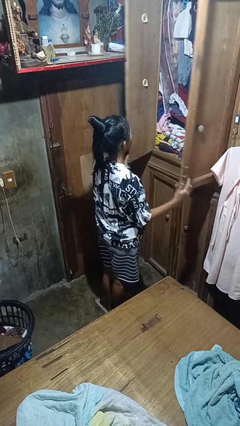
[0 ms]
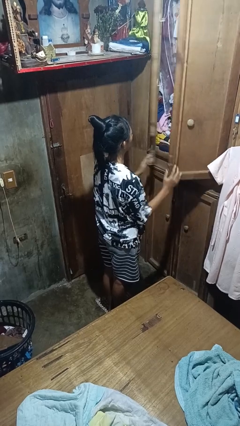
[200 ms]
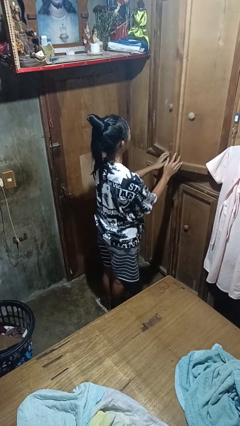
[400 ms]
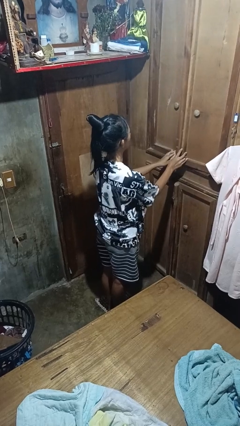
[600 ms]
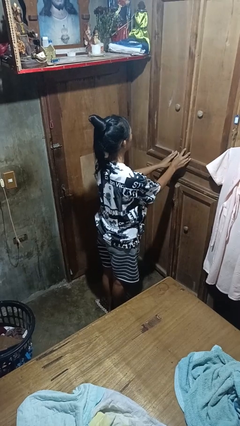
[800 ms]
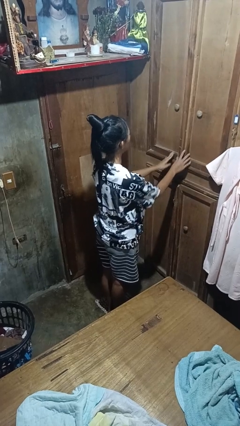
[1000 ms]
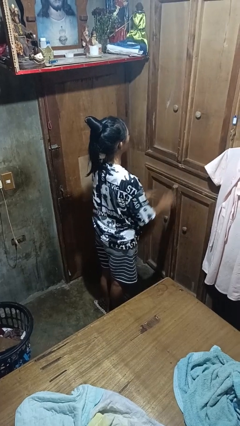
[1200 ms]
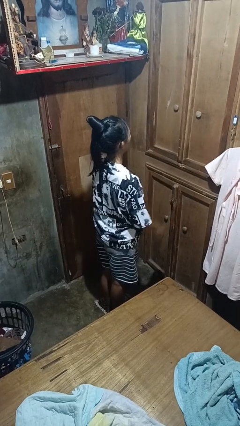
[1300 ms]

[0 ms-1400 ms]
person closes closet door

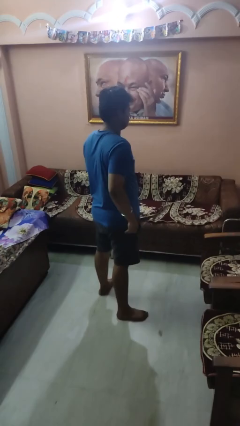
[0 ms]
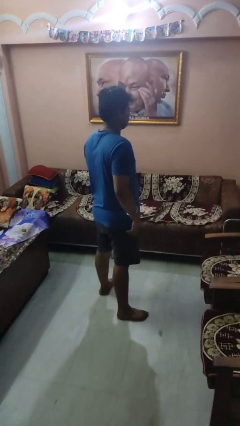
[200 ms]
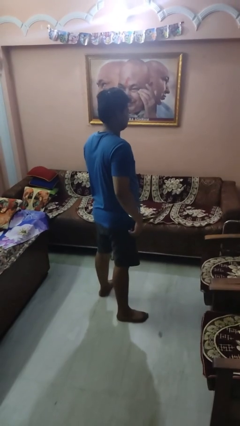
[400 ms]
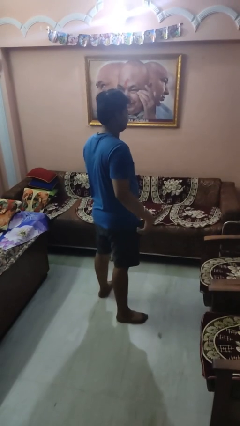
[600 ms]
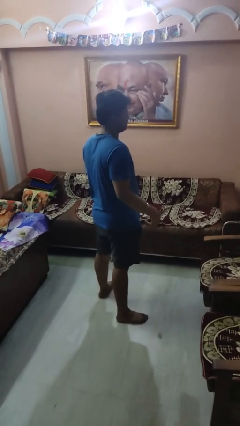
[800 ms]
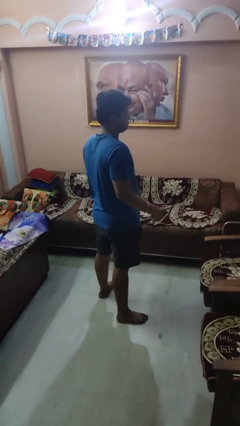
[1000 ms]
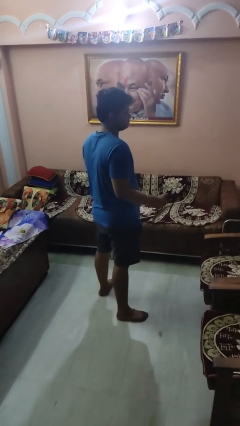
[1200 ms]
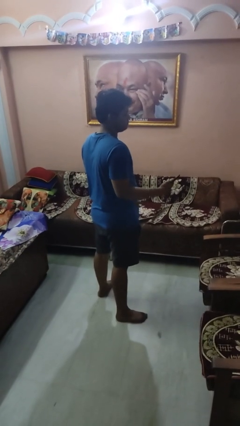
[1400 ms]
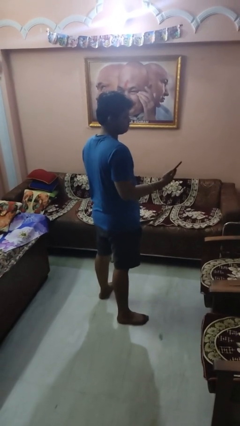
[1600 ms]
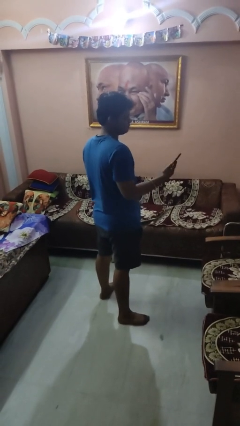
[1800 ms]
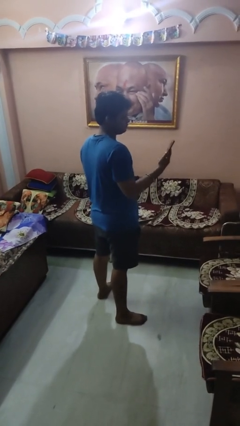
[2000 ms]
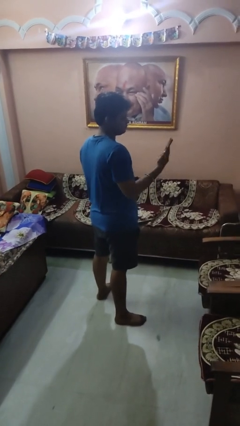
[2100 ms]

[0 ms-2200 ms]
person takes phone from pocket

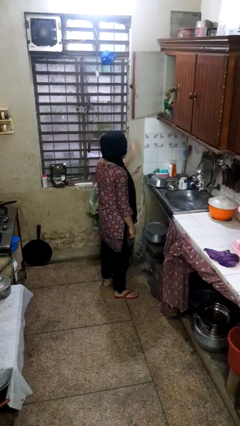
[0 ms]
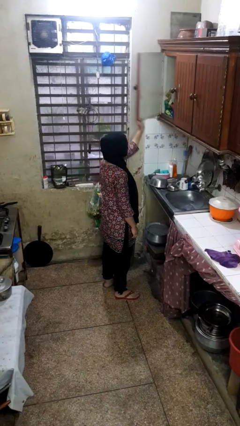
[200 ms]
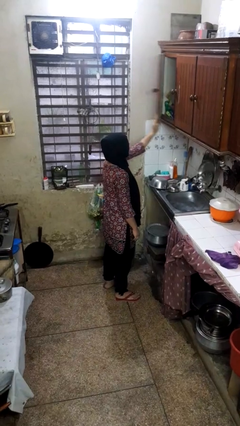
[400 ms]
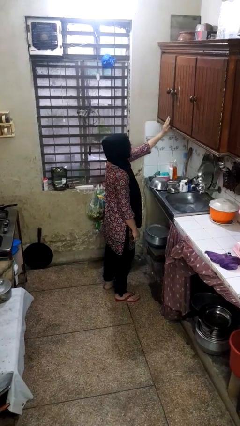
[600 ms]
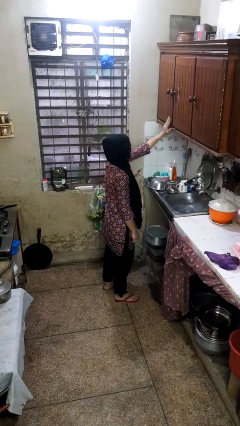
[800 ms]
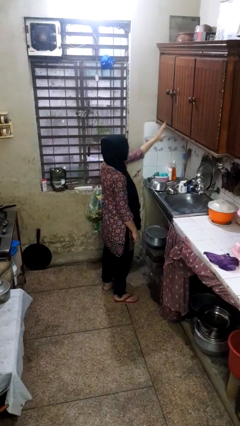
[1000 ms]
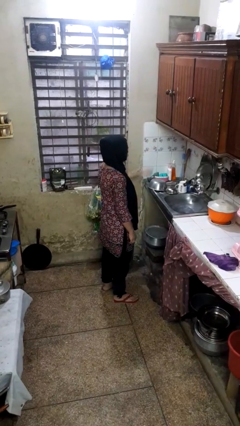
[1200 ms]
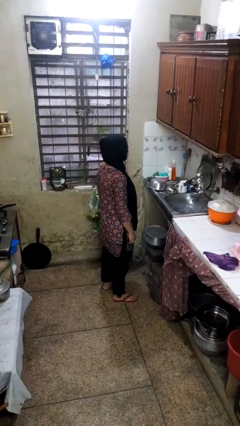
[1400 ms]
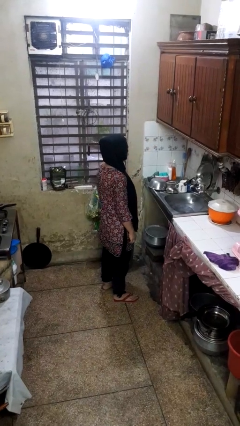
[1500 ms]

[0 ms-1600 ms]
person closes cabinet

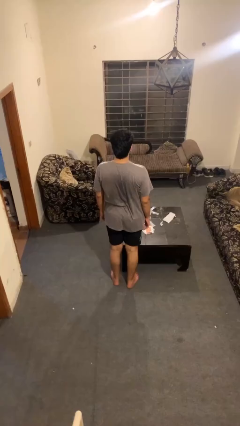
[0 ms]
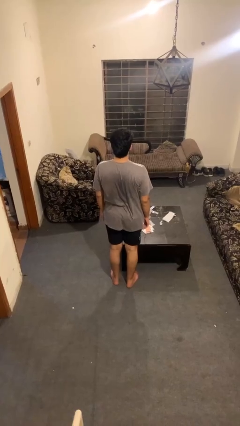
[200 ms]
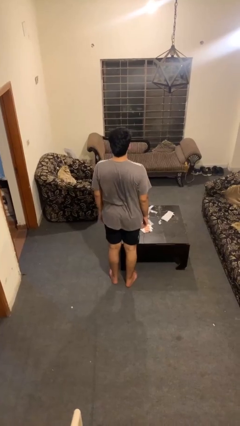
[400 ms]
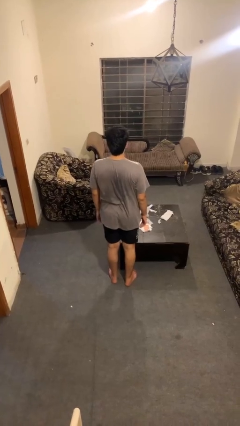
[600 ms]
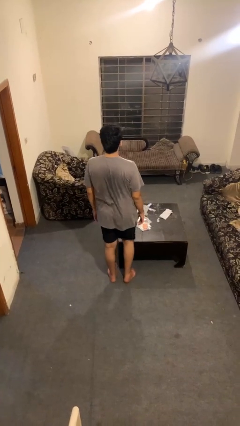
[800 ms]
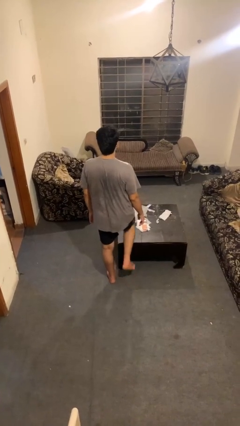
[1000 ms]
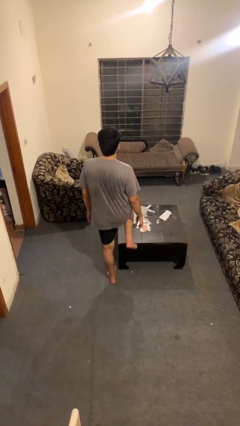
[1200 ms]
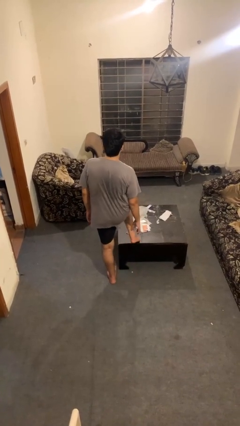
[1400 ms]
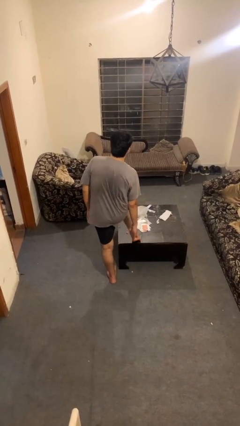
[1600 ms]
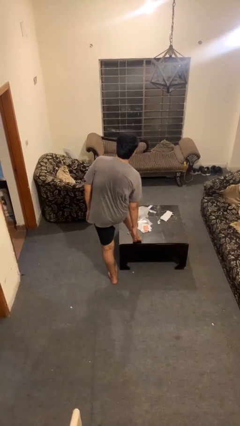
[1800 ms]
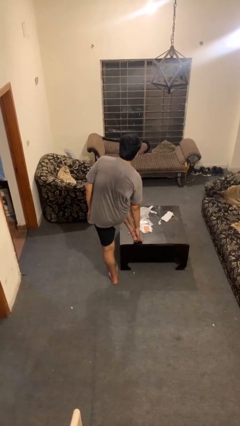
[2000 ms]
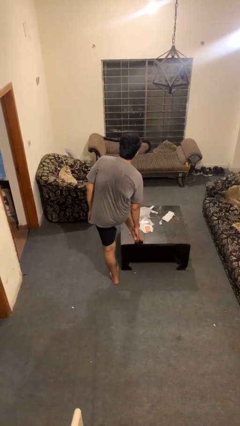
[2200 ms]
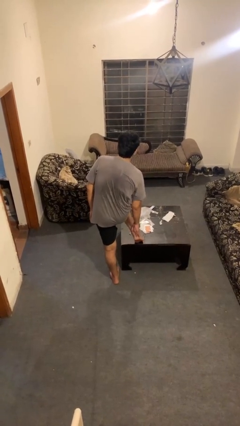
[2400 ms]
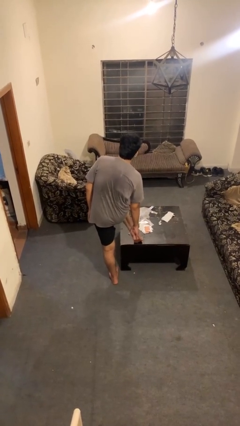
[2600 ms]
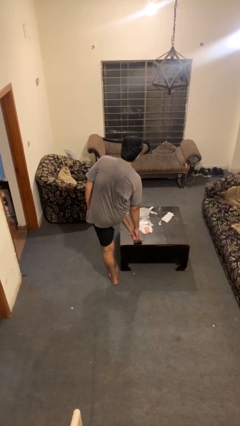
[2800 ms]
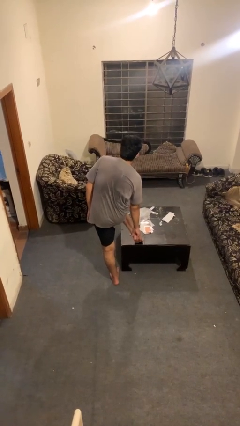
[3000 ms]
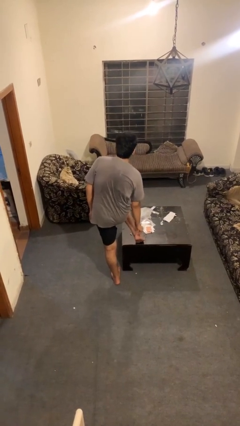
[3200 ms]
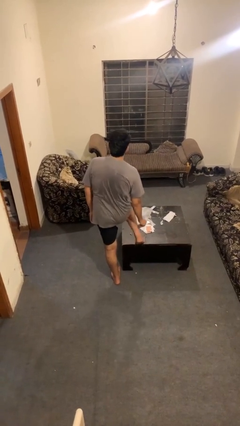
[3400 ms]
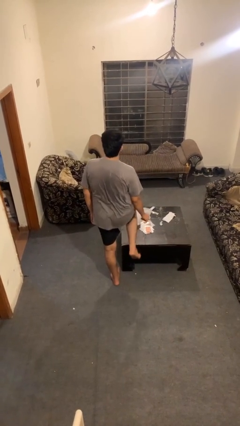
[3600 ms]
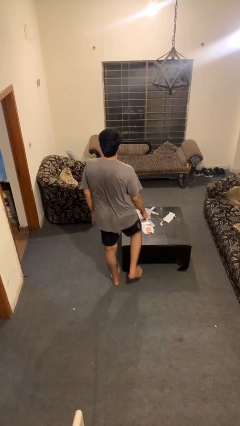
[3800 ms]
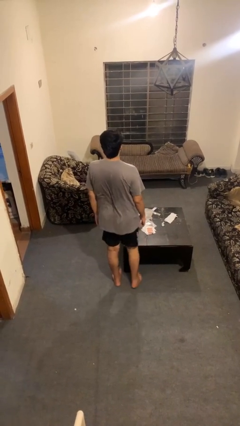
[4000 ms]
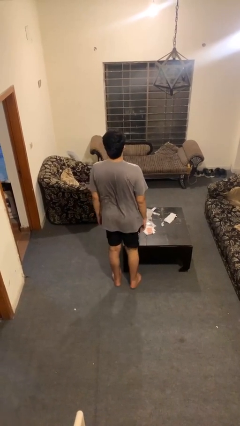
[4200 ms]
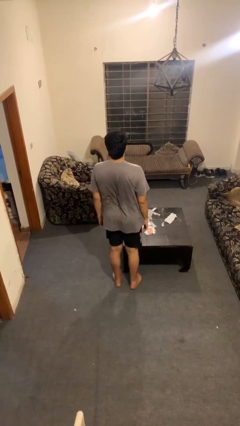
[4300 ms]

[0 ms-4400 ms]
person rubs foot

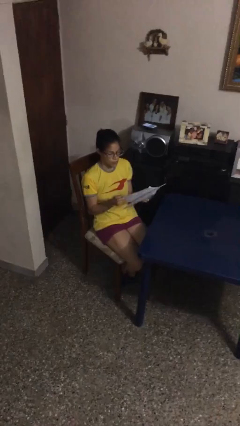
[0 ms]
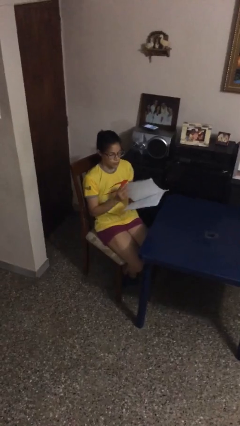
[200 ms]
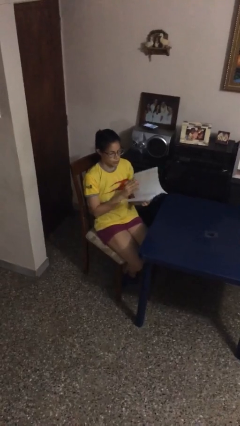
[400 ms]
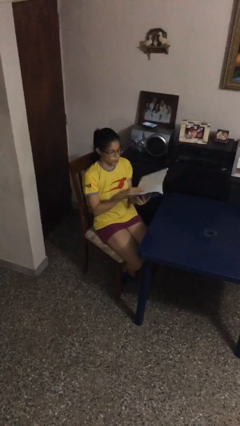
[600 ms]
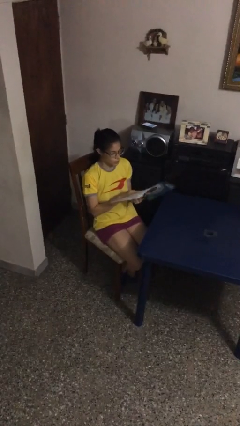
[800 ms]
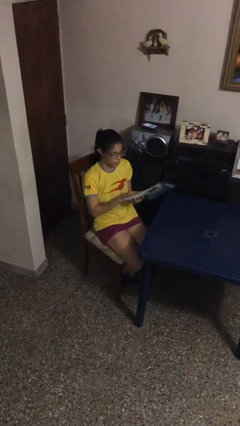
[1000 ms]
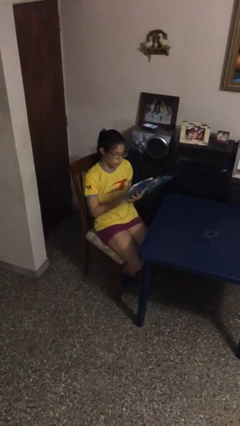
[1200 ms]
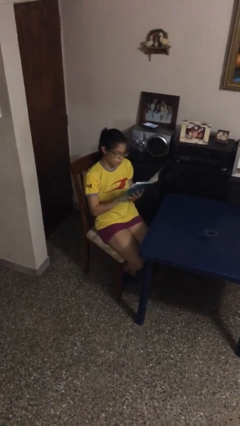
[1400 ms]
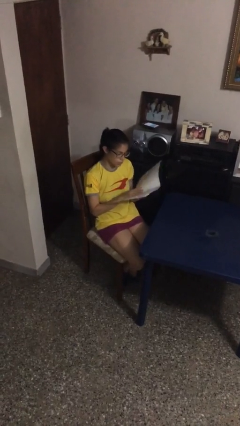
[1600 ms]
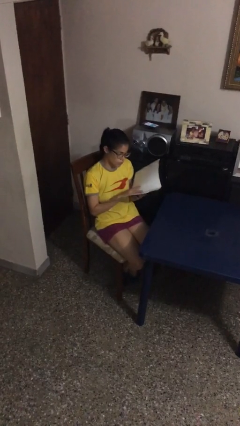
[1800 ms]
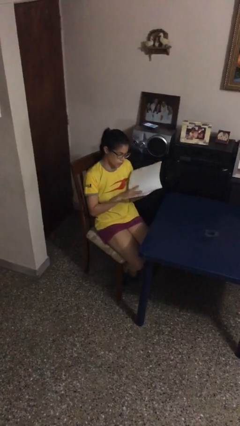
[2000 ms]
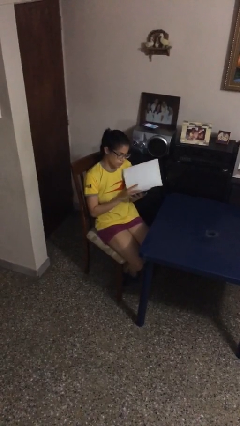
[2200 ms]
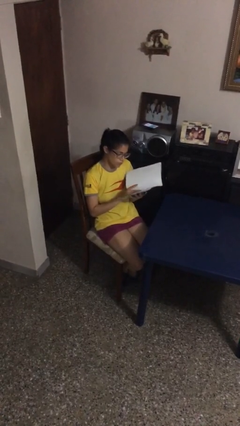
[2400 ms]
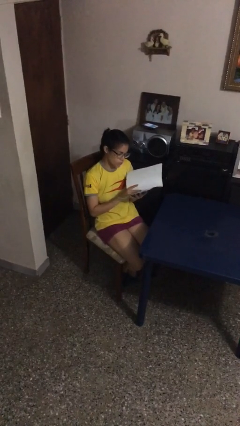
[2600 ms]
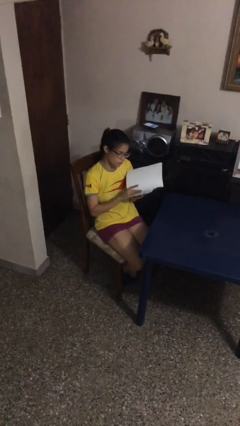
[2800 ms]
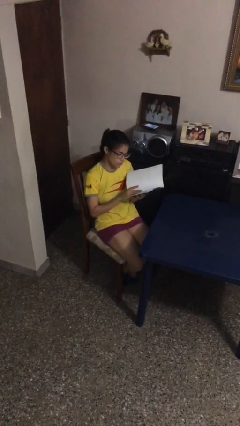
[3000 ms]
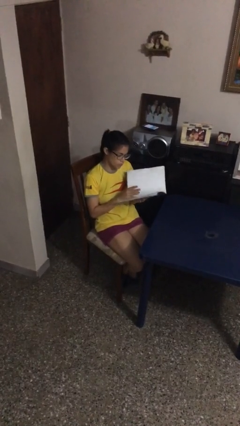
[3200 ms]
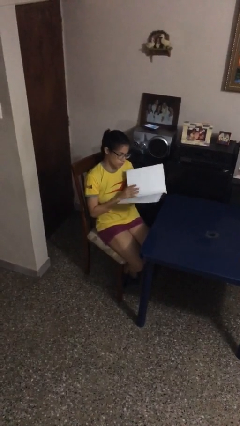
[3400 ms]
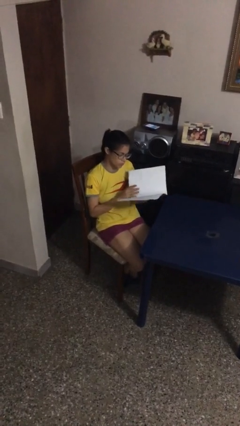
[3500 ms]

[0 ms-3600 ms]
person reads document

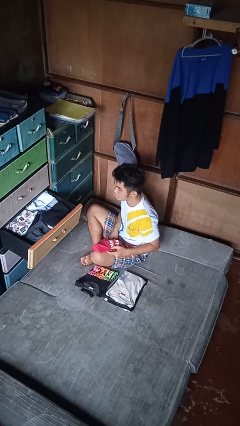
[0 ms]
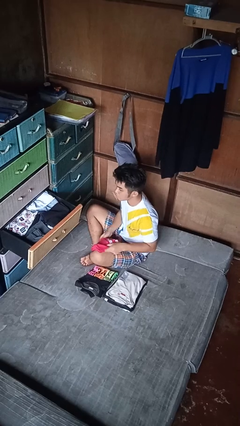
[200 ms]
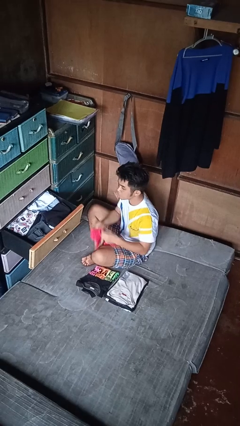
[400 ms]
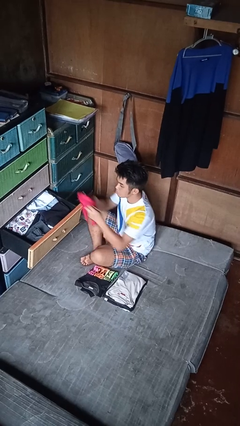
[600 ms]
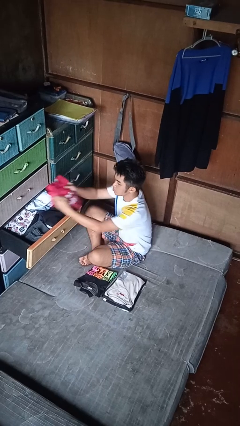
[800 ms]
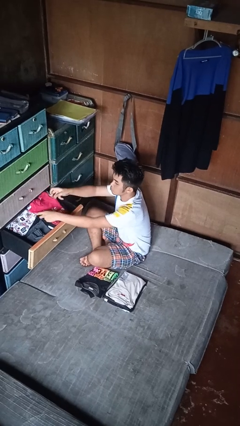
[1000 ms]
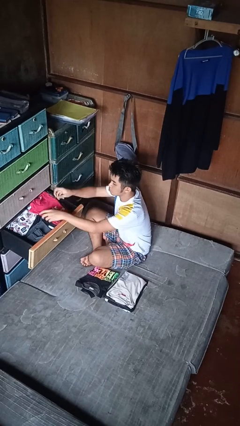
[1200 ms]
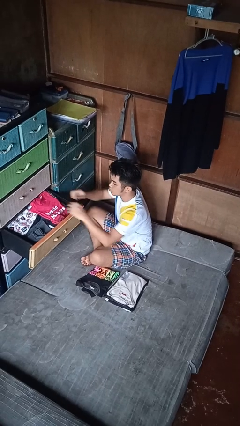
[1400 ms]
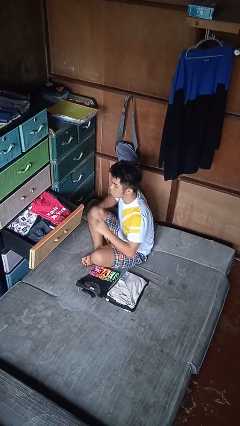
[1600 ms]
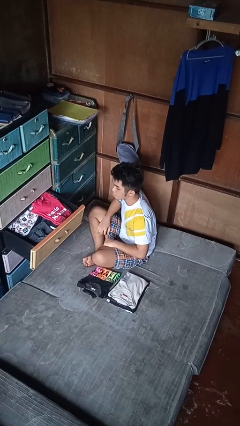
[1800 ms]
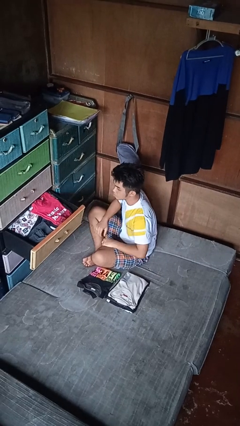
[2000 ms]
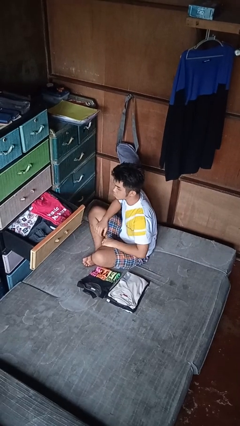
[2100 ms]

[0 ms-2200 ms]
person puts clothes into dresser

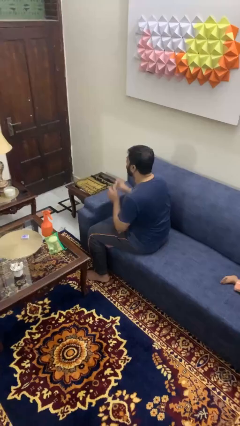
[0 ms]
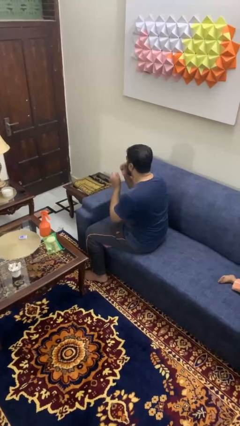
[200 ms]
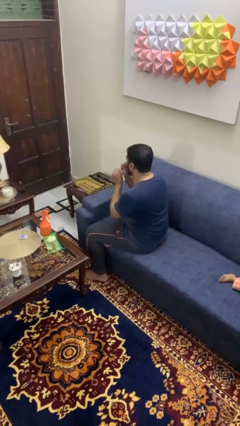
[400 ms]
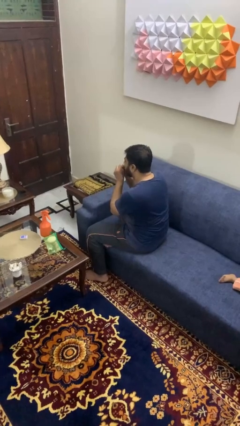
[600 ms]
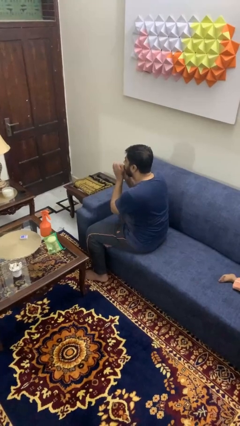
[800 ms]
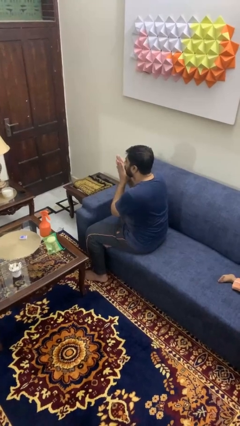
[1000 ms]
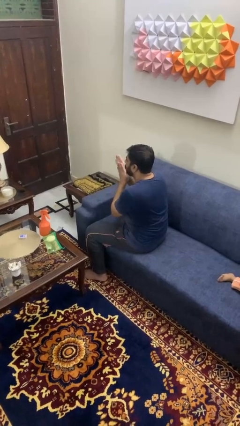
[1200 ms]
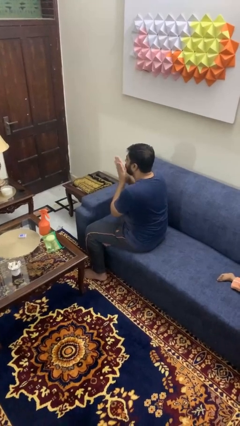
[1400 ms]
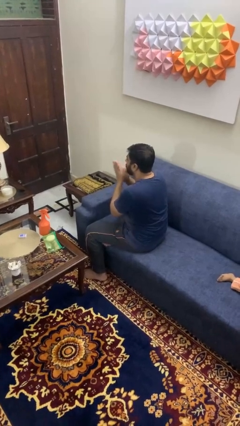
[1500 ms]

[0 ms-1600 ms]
person blows into hands
